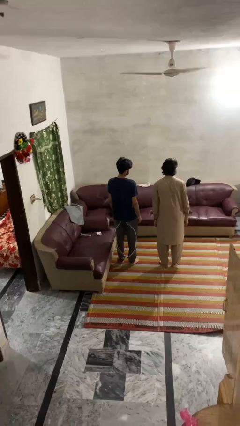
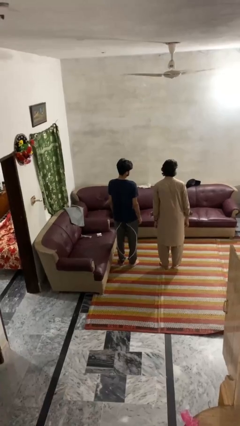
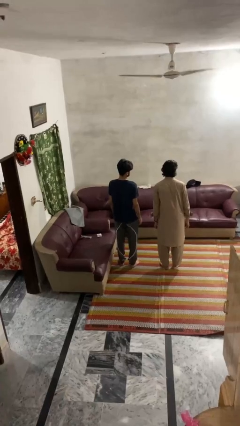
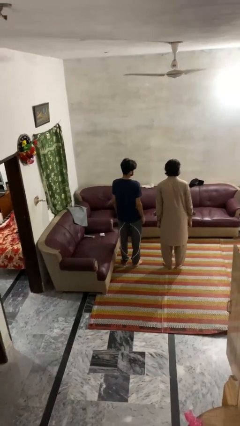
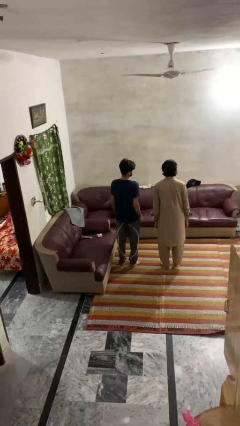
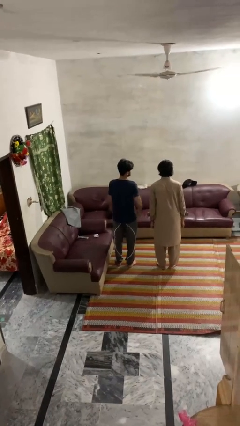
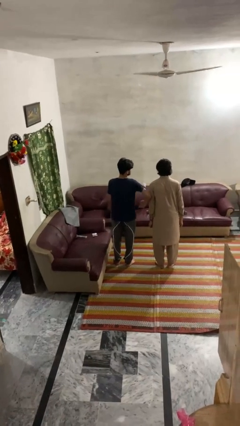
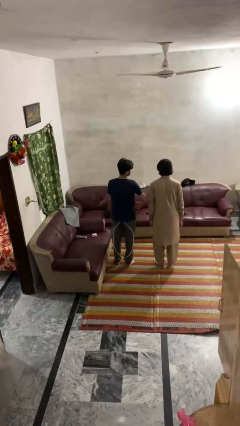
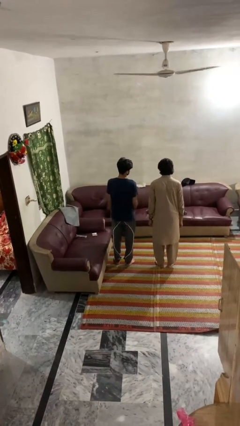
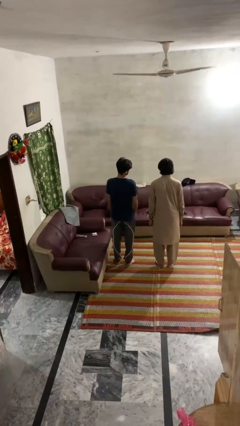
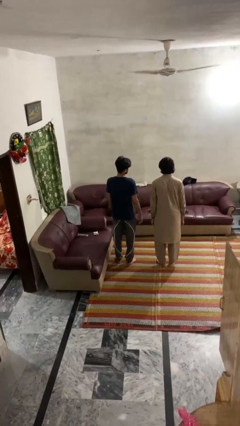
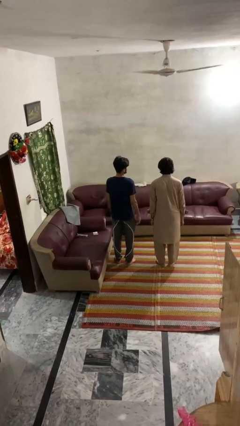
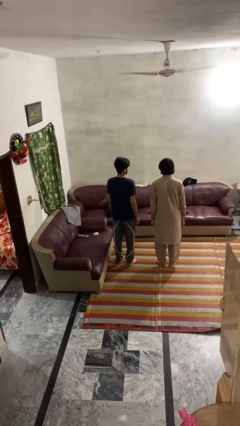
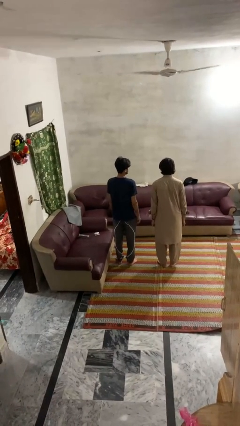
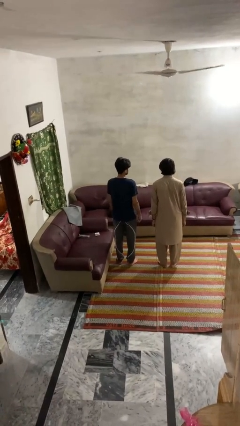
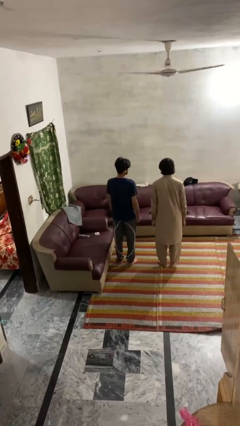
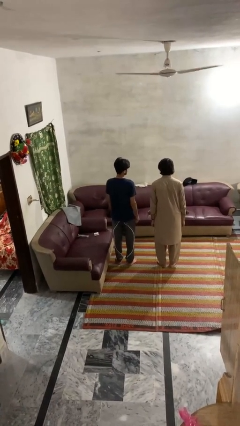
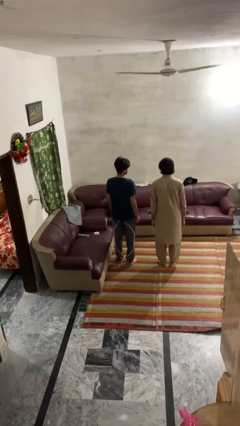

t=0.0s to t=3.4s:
person nudges person with elbow

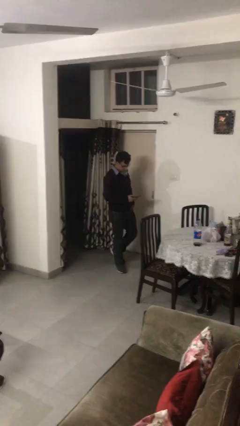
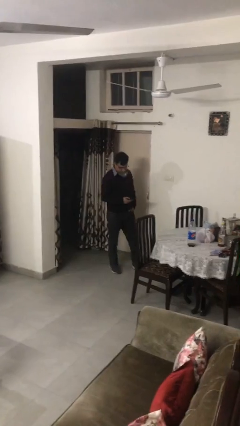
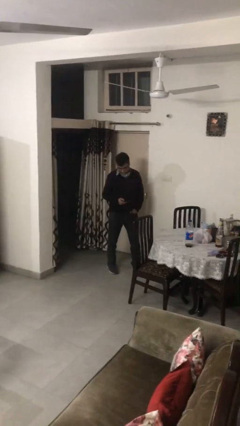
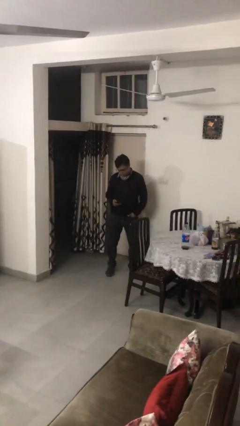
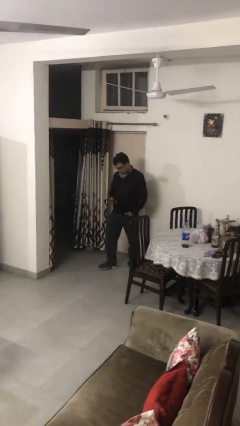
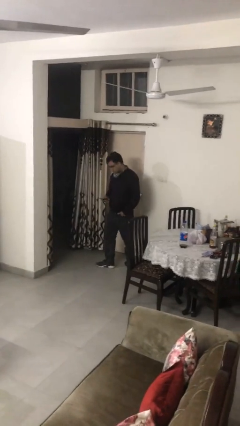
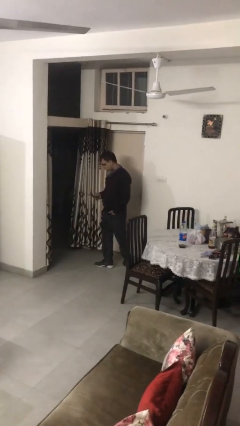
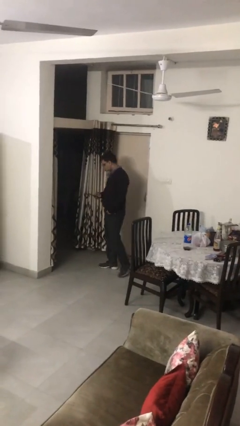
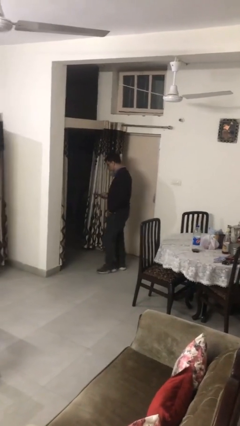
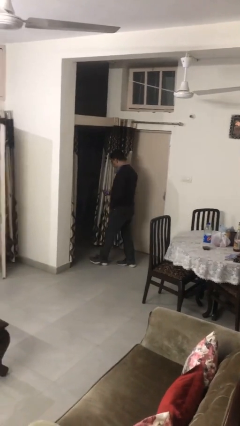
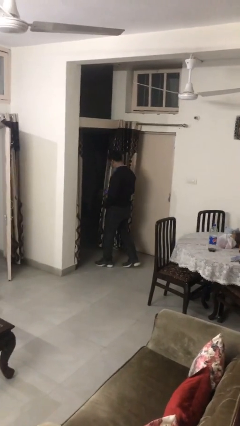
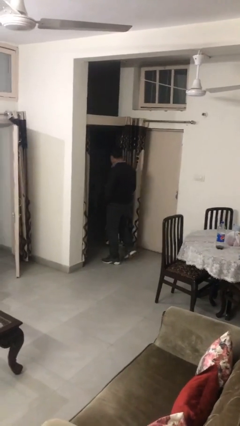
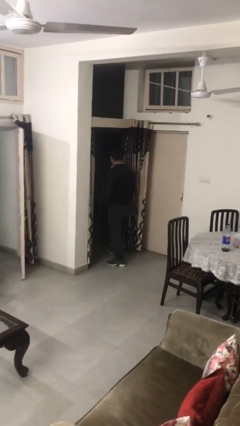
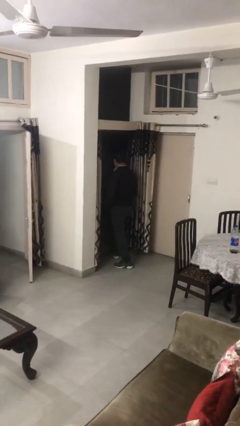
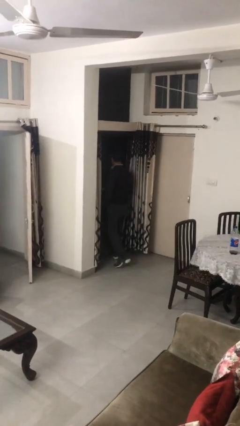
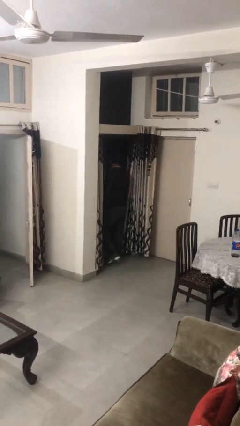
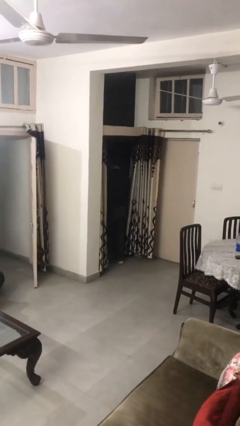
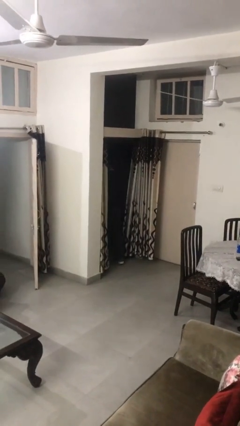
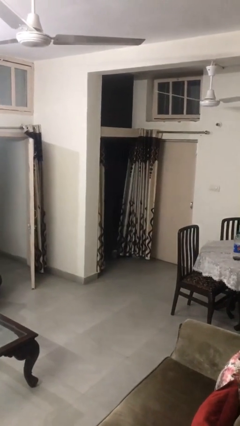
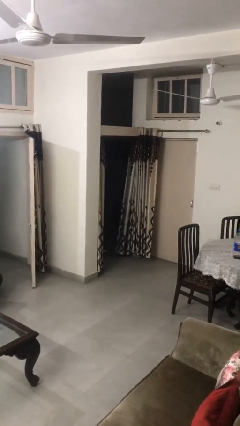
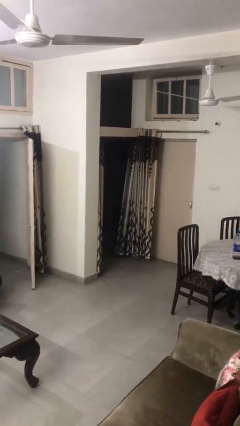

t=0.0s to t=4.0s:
person exits scene through structure

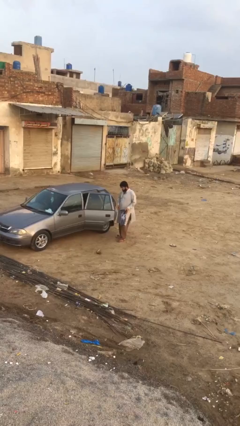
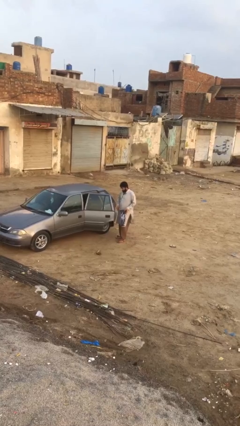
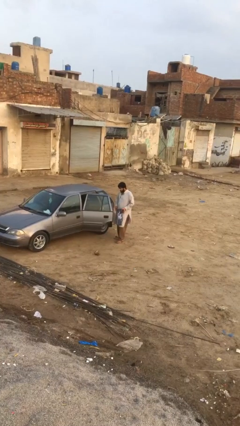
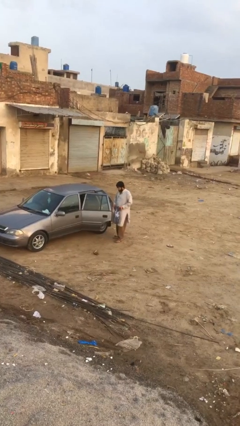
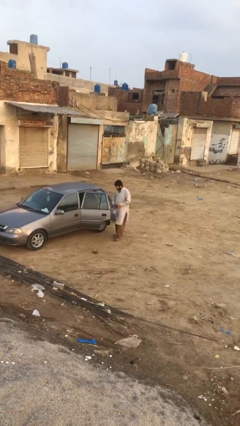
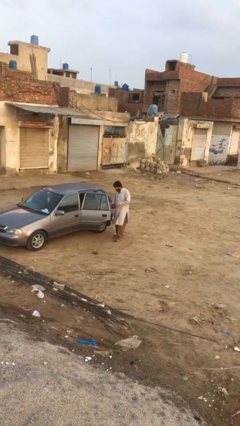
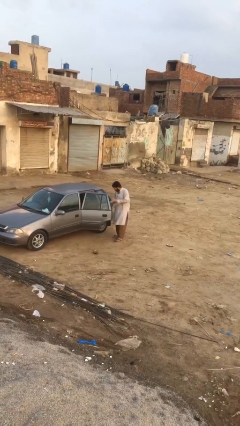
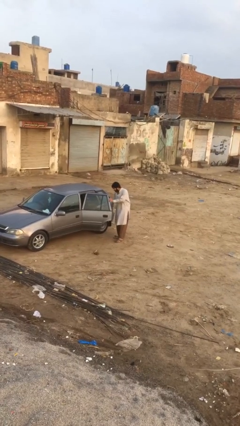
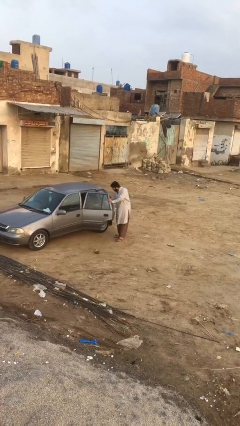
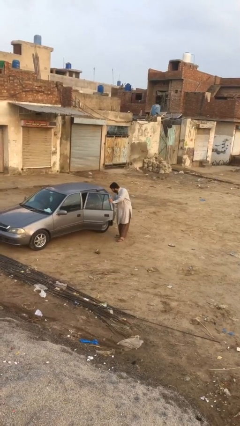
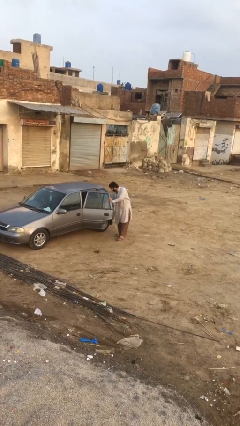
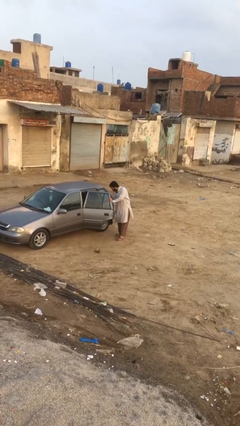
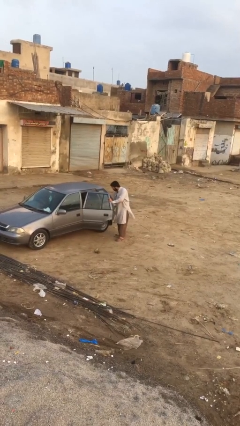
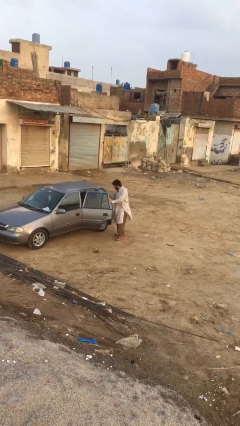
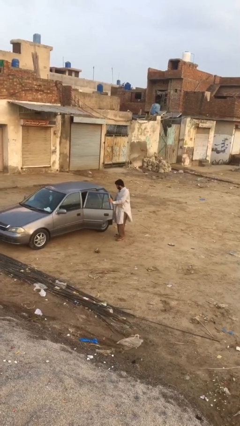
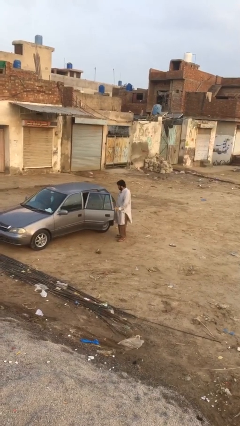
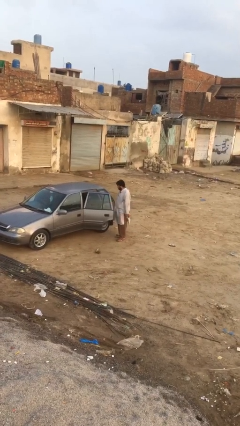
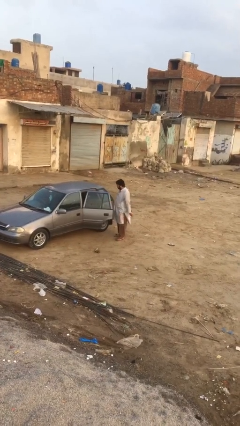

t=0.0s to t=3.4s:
person loads car

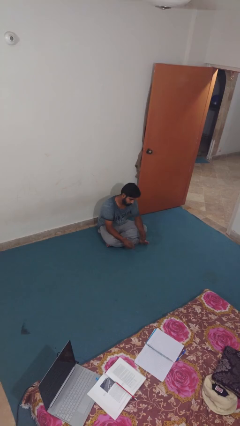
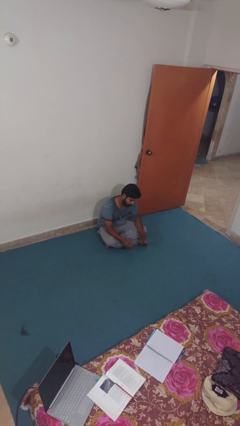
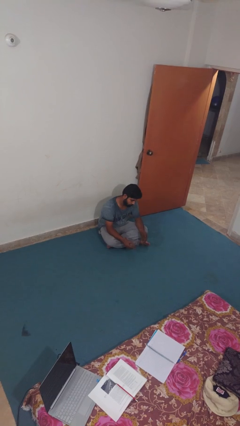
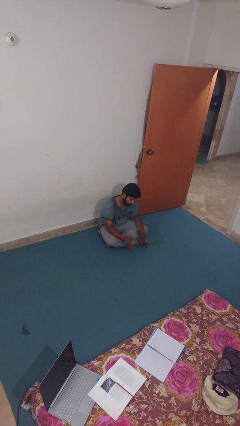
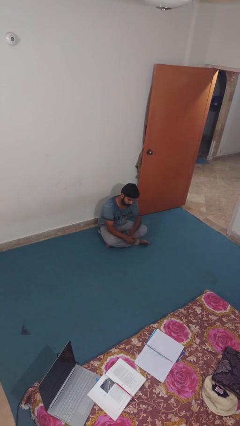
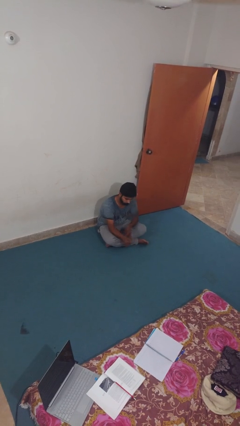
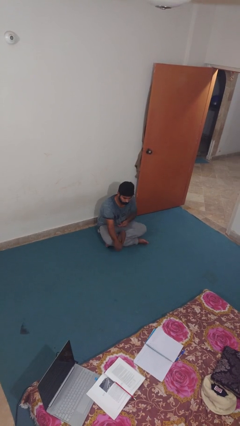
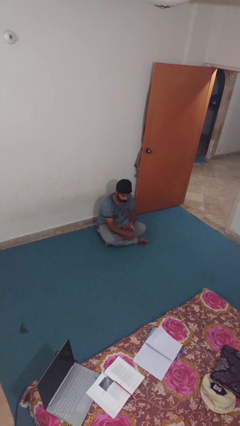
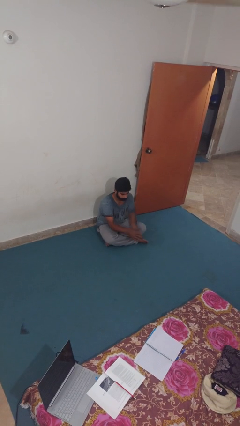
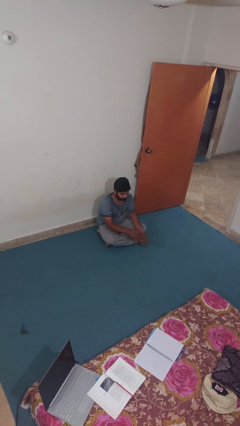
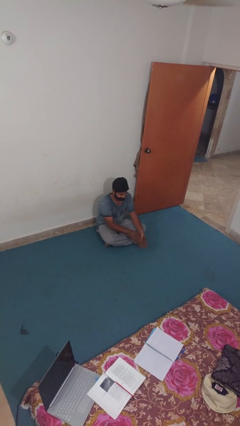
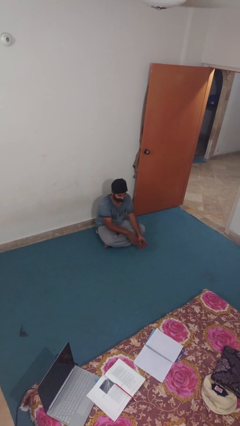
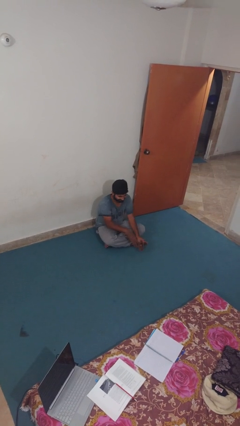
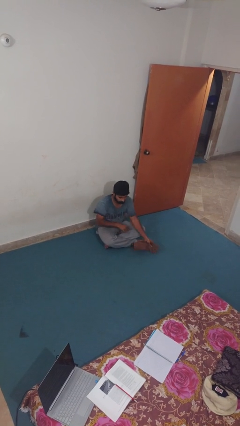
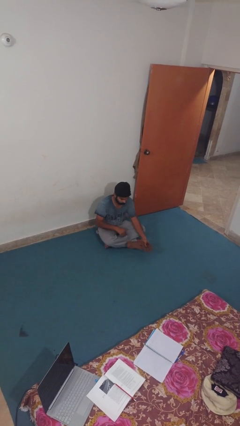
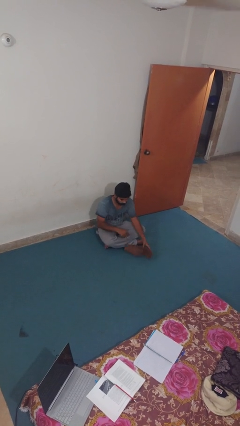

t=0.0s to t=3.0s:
person takes off gloves

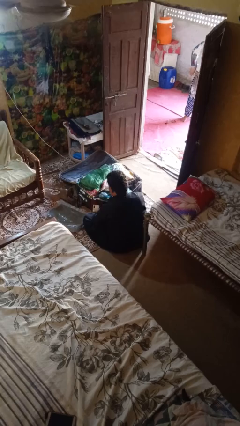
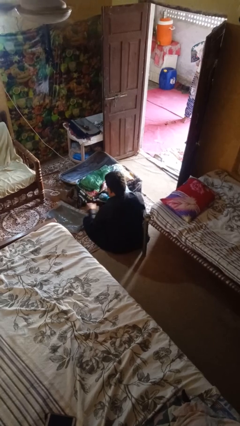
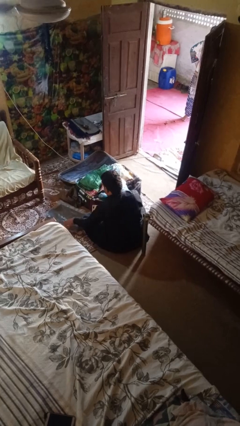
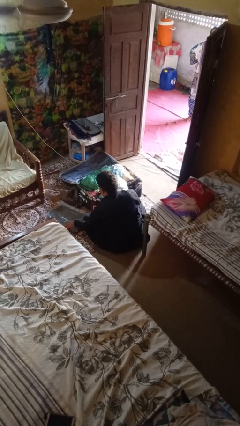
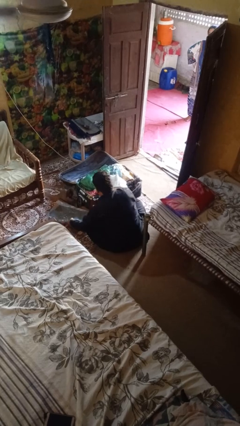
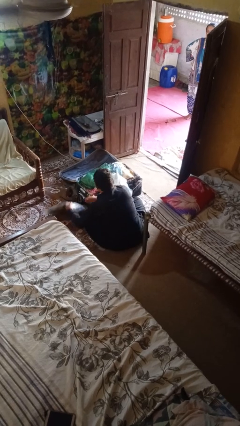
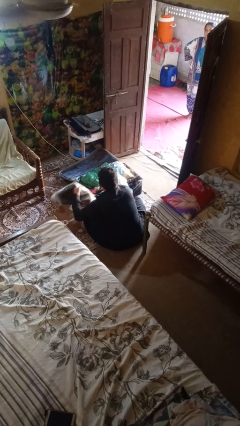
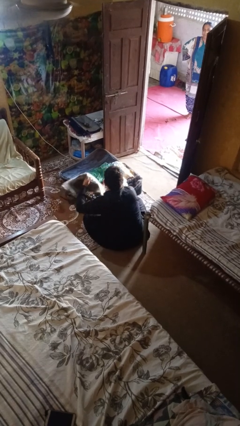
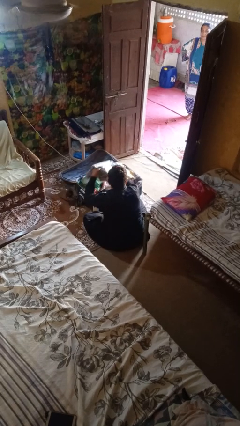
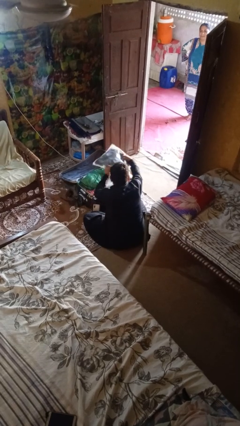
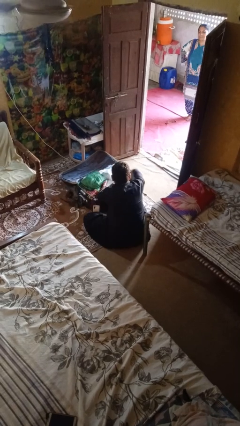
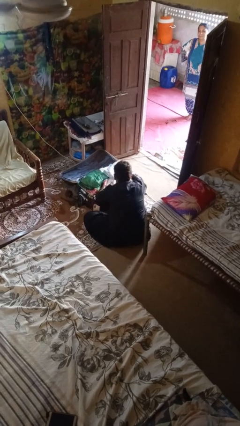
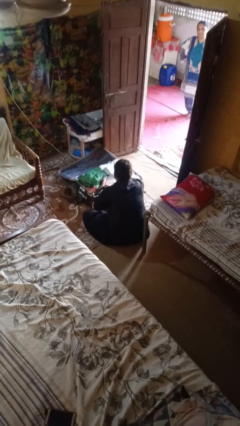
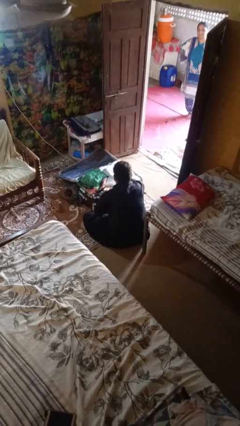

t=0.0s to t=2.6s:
person loads clothes into suitcase

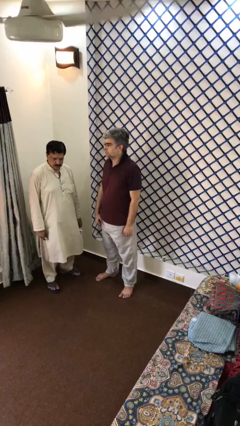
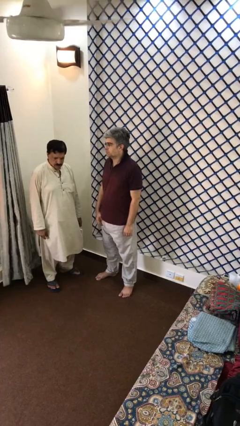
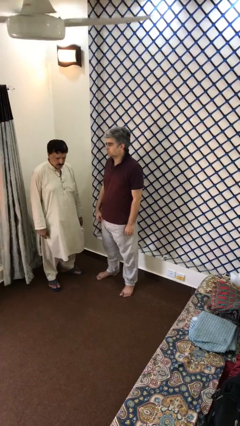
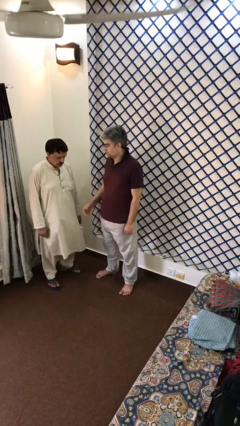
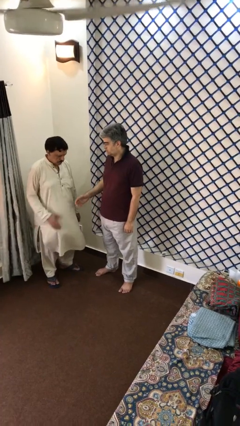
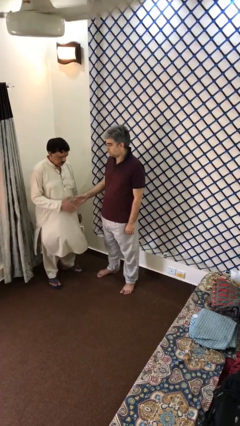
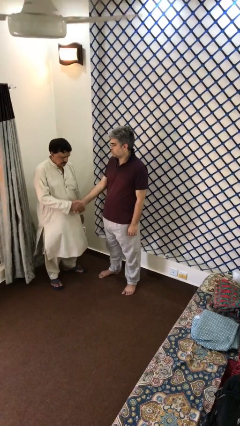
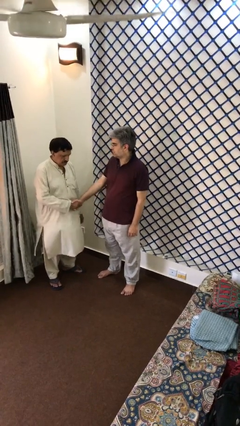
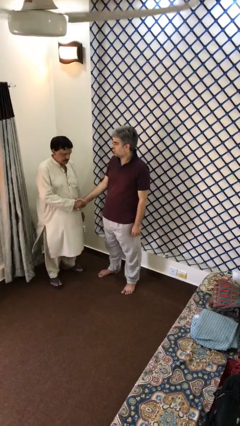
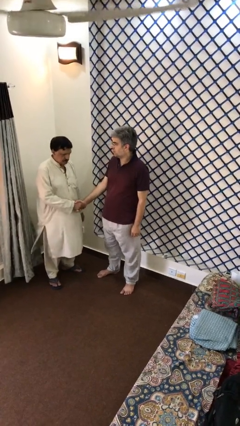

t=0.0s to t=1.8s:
person shakes hand
